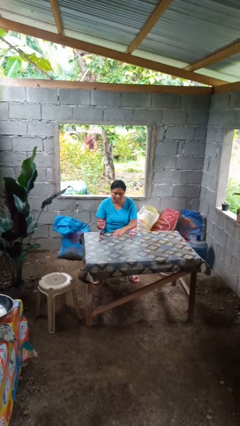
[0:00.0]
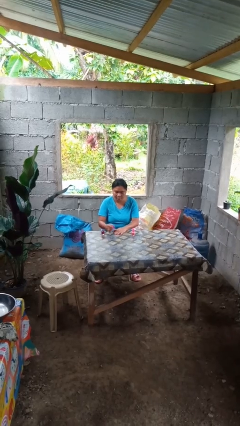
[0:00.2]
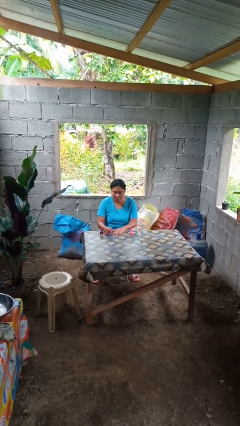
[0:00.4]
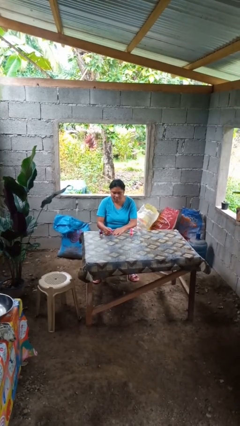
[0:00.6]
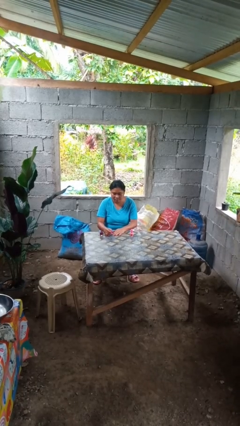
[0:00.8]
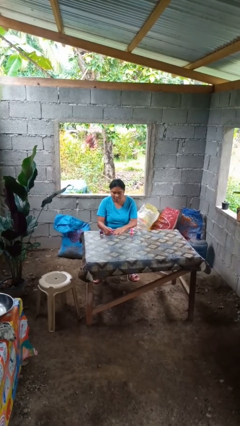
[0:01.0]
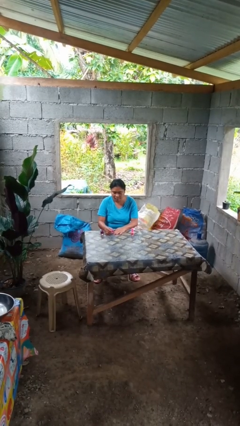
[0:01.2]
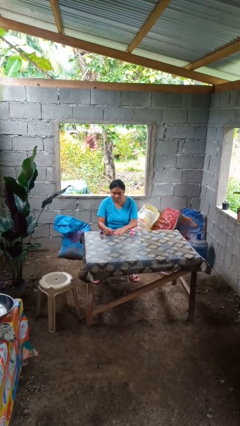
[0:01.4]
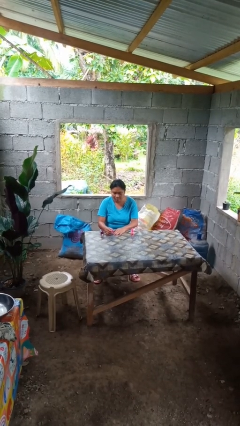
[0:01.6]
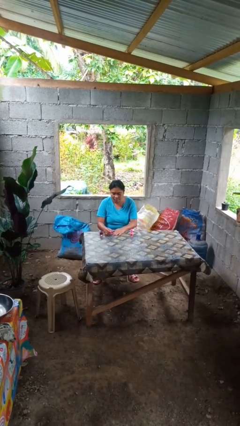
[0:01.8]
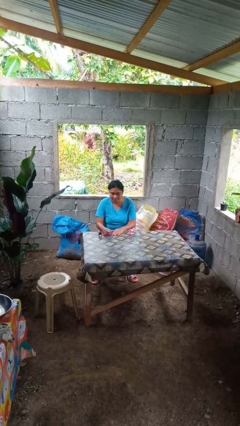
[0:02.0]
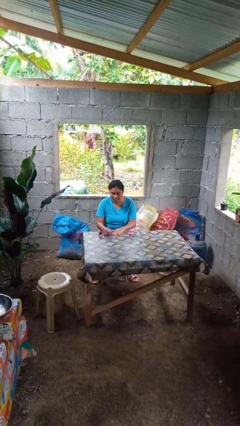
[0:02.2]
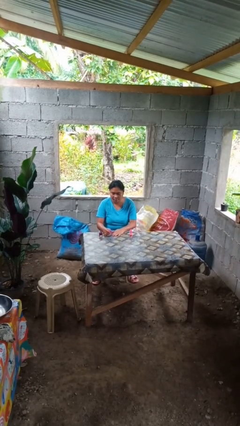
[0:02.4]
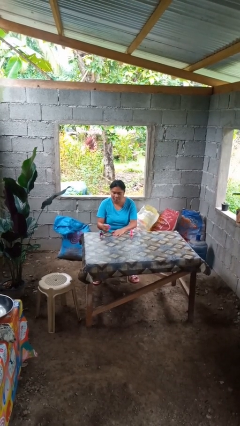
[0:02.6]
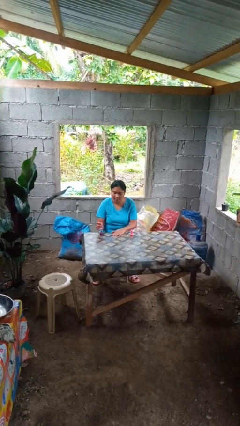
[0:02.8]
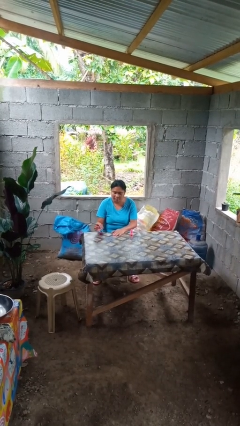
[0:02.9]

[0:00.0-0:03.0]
person paints fingernails

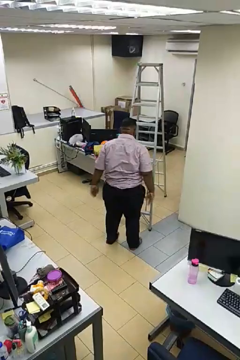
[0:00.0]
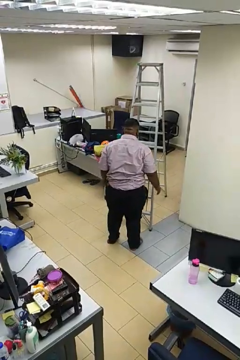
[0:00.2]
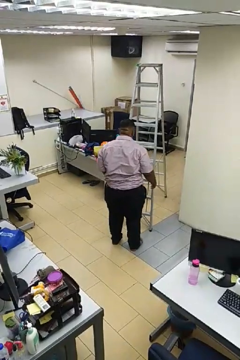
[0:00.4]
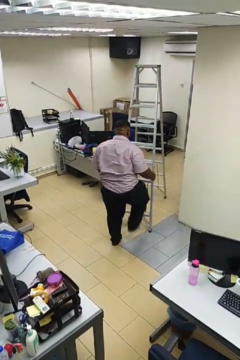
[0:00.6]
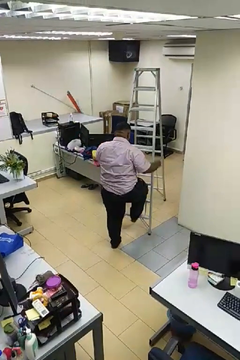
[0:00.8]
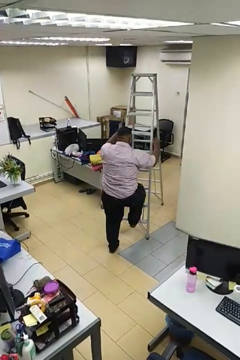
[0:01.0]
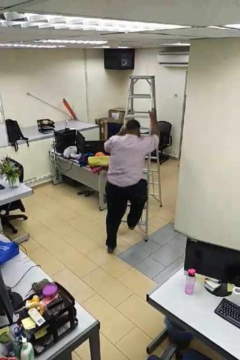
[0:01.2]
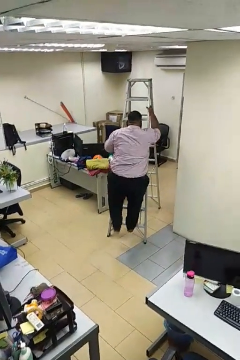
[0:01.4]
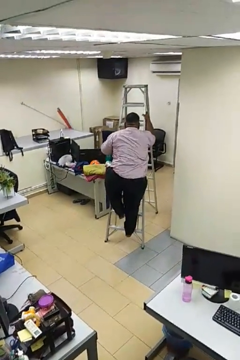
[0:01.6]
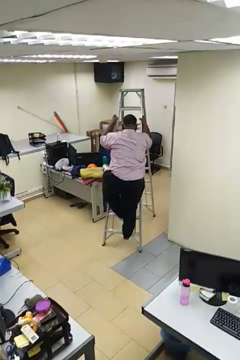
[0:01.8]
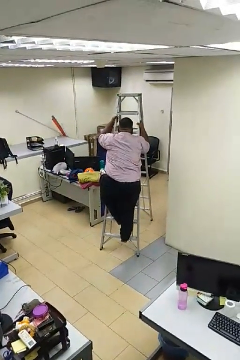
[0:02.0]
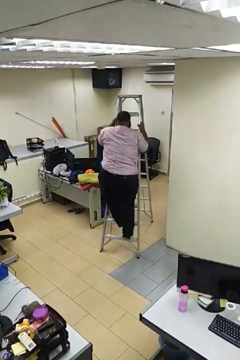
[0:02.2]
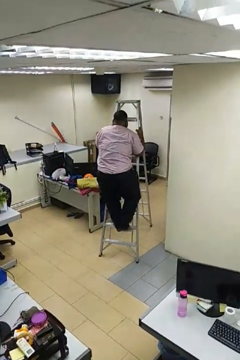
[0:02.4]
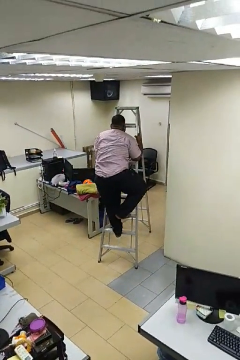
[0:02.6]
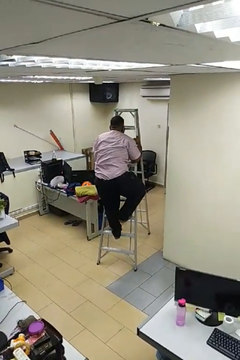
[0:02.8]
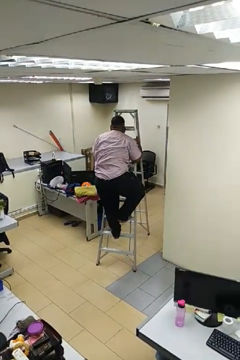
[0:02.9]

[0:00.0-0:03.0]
person climbs up ladder

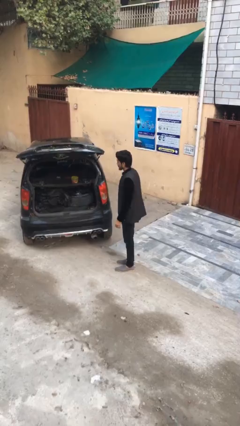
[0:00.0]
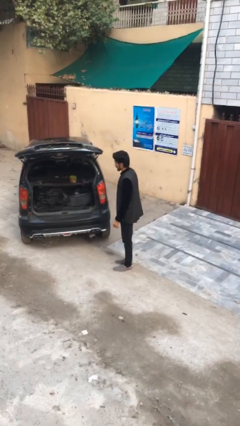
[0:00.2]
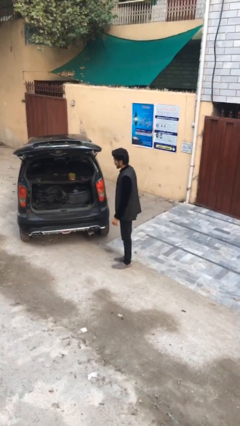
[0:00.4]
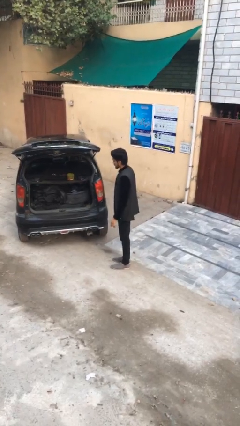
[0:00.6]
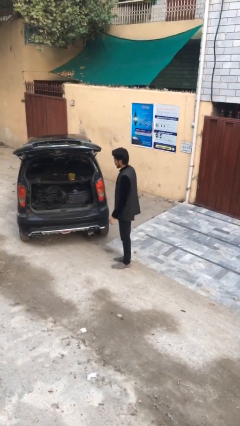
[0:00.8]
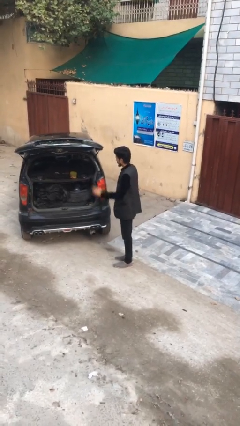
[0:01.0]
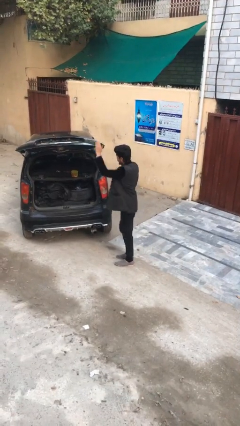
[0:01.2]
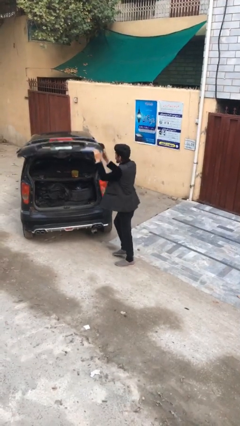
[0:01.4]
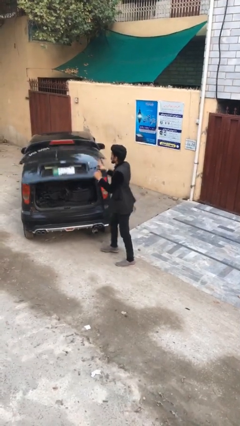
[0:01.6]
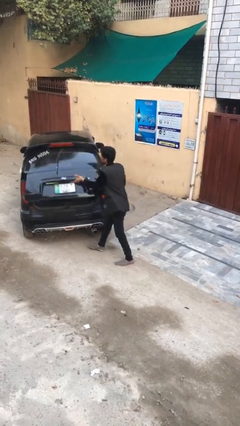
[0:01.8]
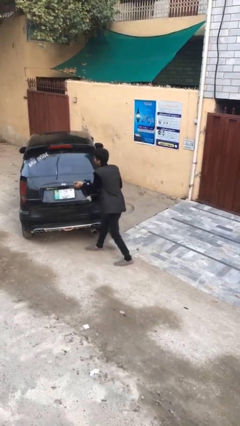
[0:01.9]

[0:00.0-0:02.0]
person closes car trunk

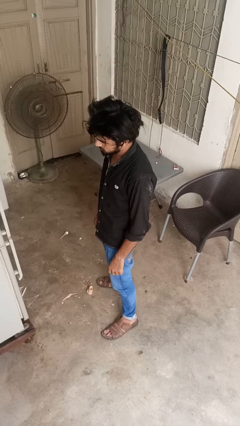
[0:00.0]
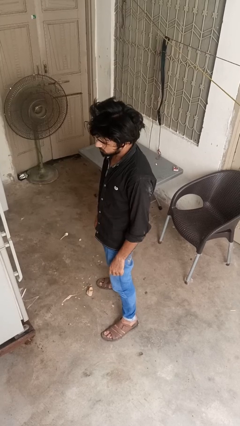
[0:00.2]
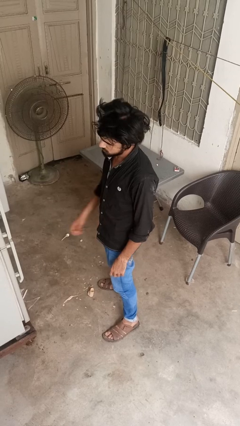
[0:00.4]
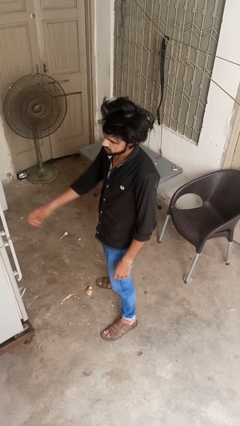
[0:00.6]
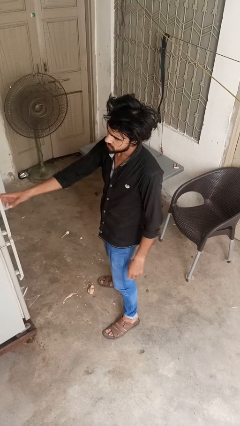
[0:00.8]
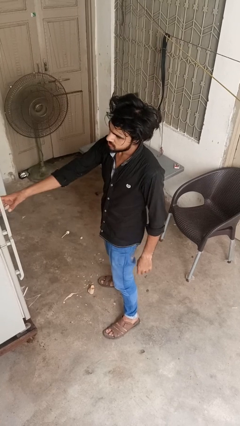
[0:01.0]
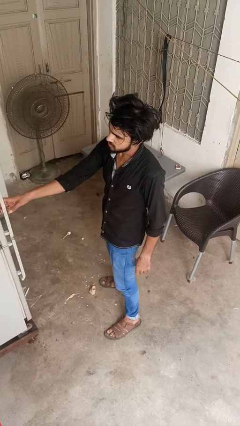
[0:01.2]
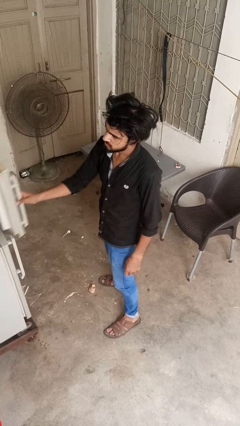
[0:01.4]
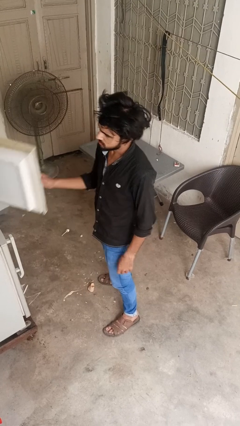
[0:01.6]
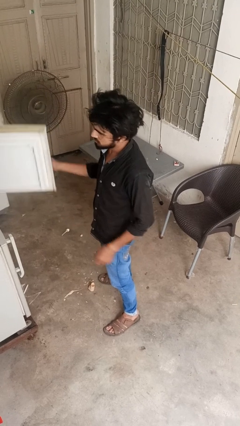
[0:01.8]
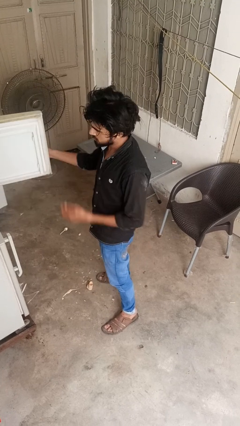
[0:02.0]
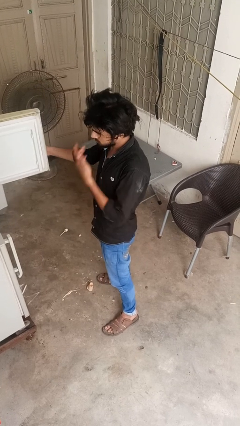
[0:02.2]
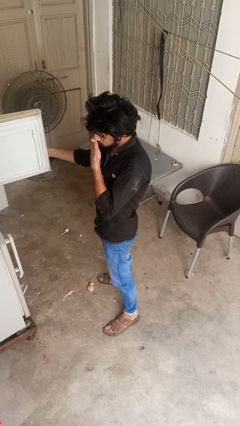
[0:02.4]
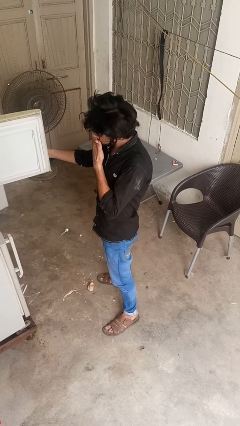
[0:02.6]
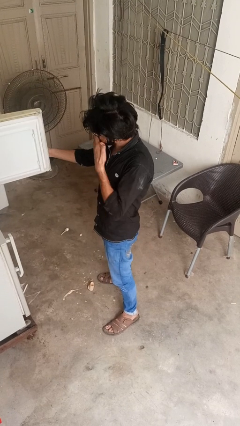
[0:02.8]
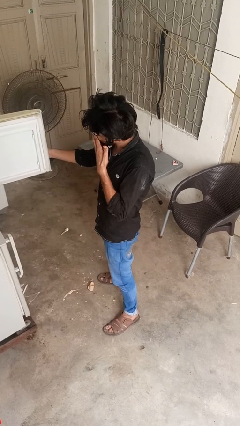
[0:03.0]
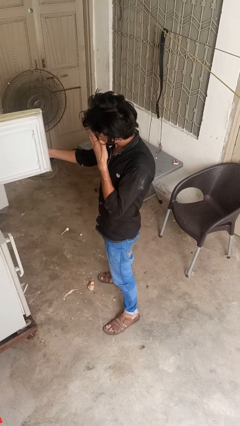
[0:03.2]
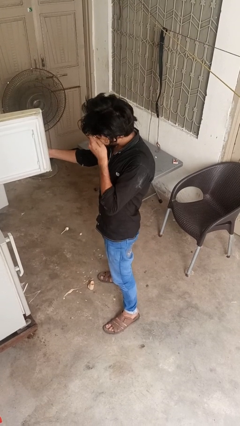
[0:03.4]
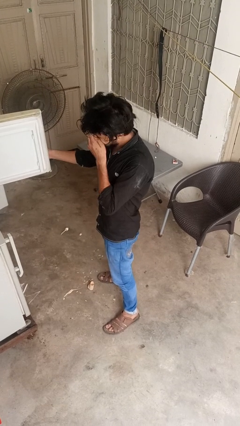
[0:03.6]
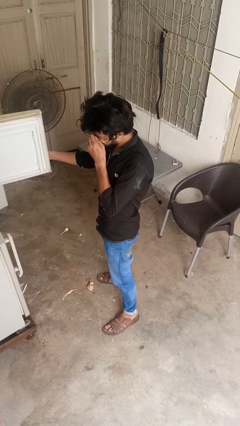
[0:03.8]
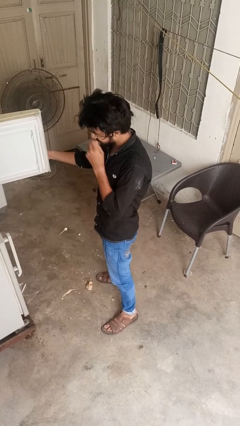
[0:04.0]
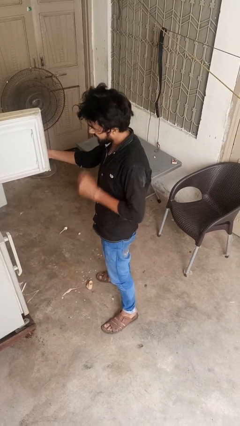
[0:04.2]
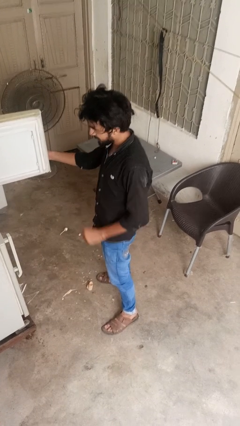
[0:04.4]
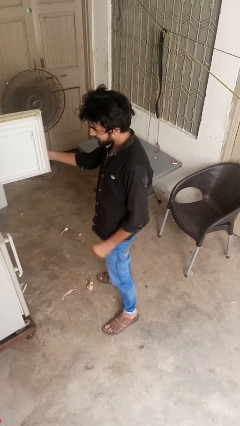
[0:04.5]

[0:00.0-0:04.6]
person opens refrigerator

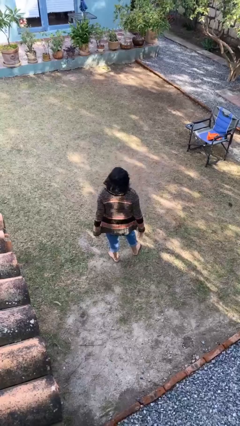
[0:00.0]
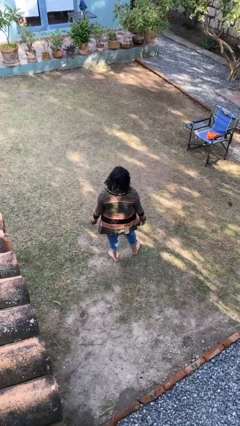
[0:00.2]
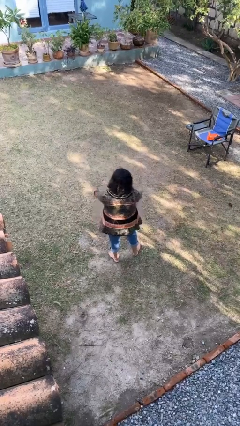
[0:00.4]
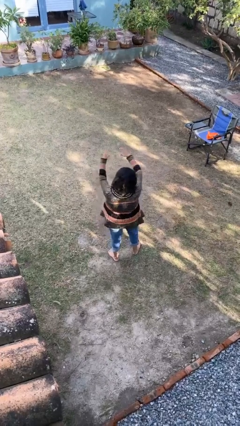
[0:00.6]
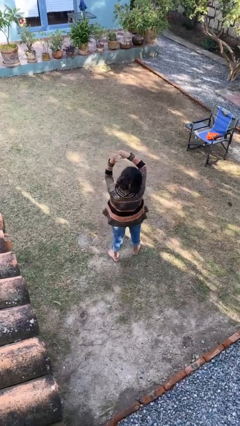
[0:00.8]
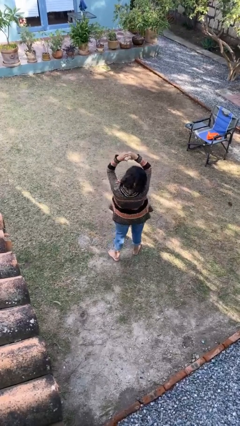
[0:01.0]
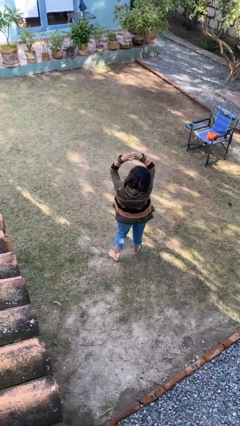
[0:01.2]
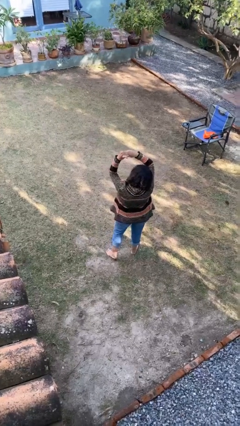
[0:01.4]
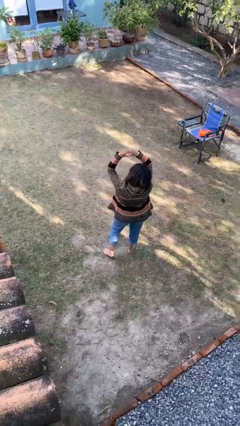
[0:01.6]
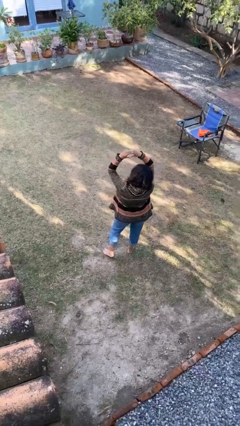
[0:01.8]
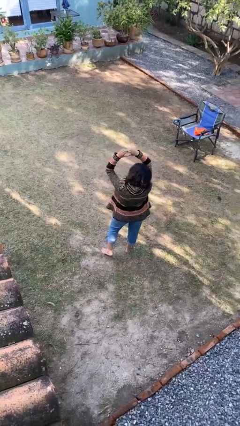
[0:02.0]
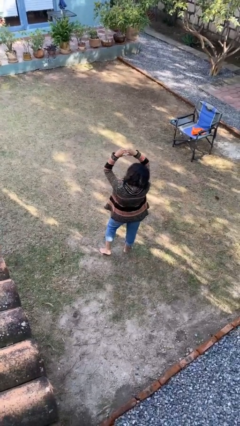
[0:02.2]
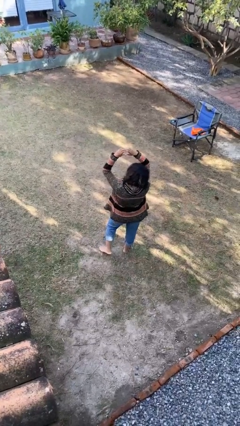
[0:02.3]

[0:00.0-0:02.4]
person gestures heart

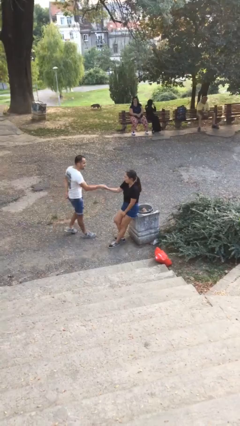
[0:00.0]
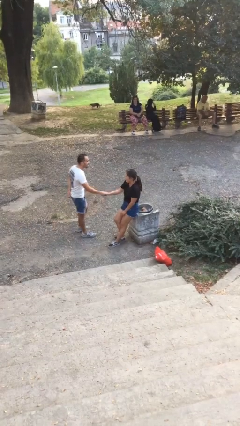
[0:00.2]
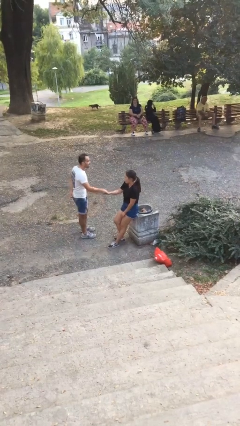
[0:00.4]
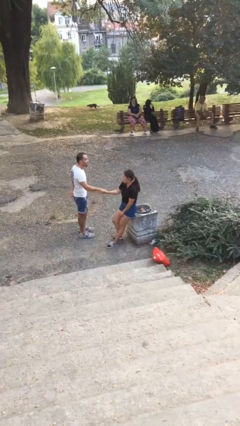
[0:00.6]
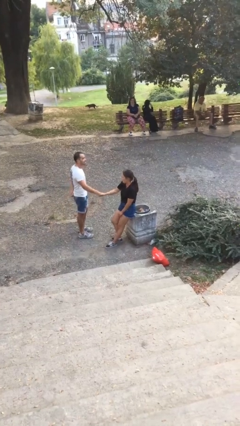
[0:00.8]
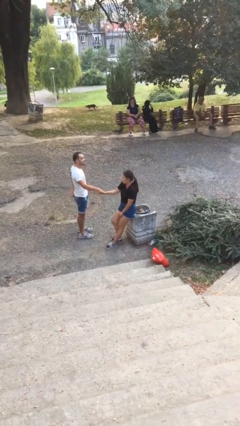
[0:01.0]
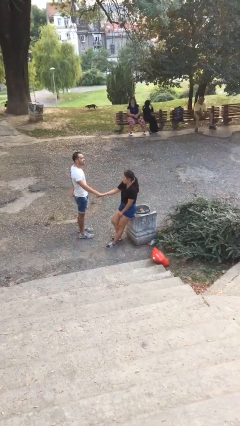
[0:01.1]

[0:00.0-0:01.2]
person shakes hand

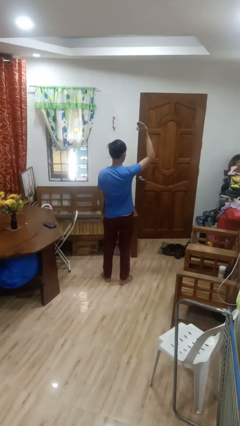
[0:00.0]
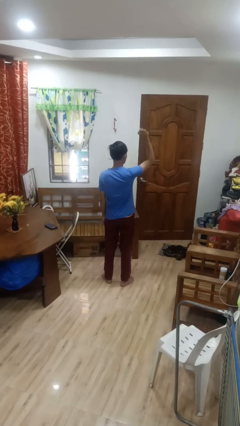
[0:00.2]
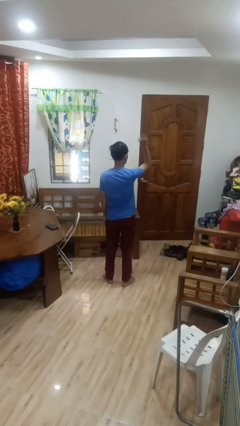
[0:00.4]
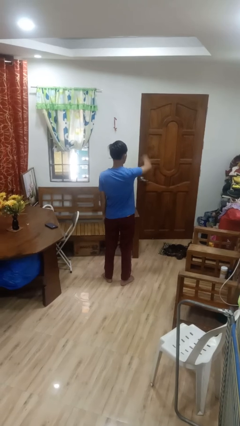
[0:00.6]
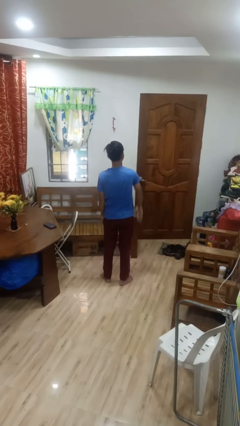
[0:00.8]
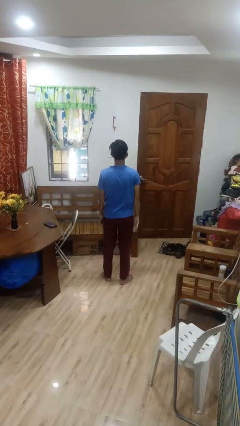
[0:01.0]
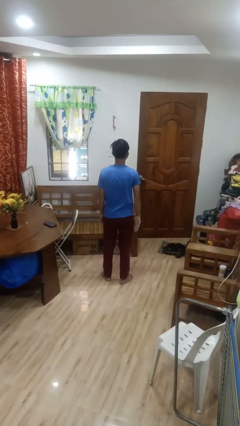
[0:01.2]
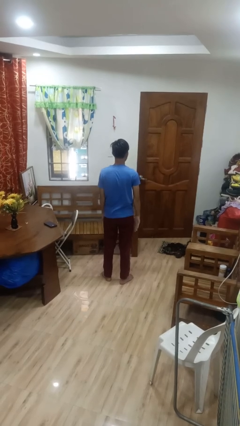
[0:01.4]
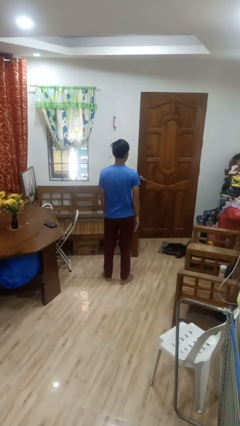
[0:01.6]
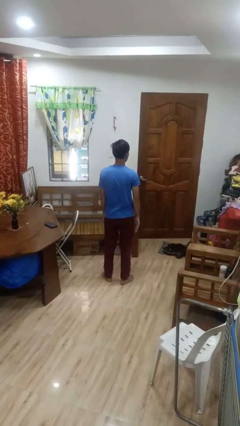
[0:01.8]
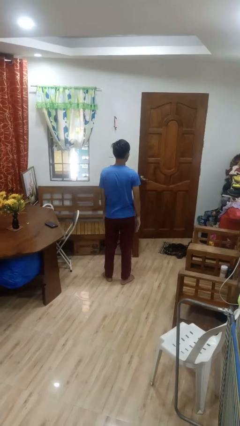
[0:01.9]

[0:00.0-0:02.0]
person gestures swipe down
